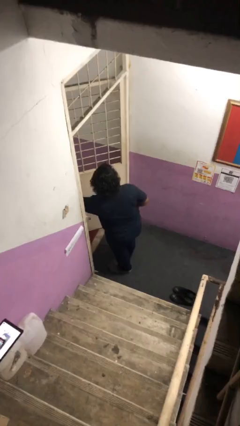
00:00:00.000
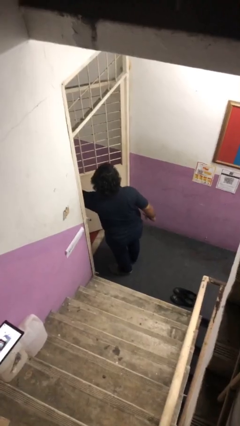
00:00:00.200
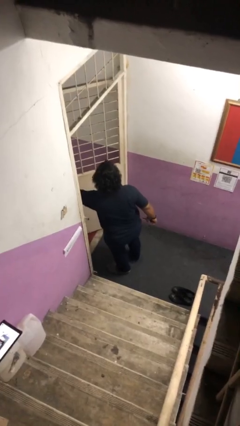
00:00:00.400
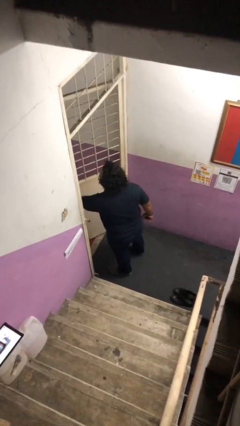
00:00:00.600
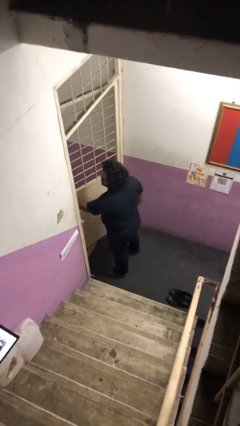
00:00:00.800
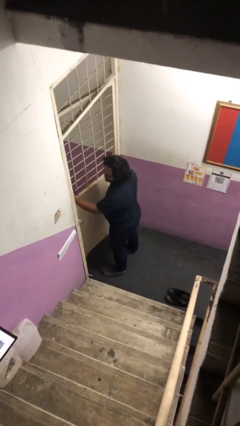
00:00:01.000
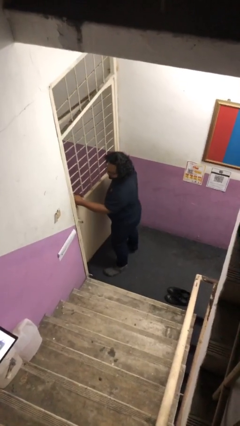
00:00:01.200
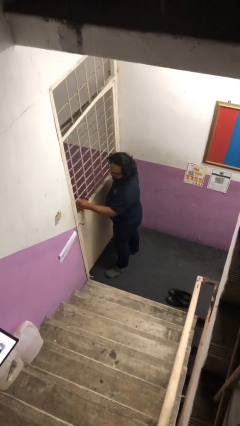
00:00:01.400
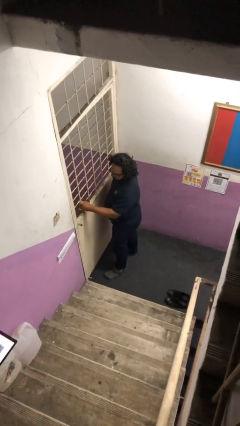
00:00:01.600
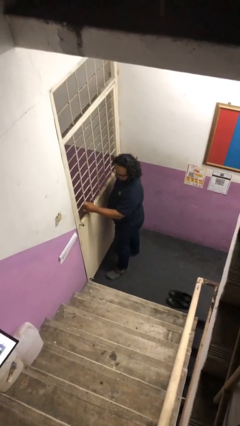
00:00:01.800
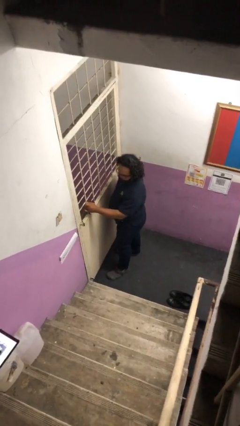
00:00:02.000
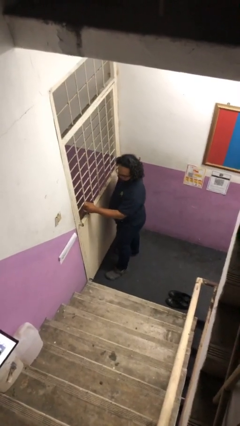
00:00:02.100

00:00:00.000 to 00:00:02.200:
person closes facility door

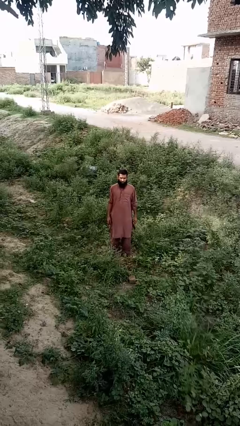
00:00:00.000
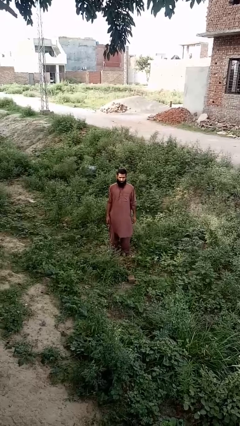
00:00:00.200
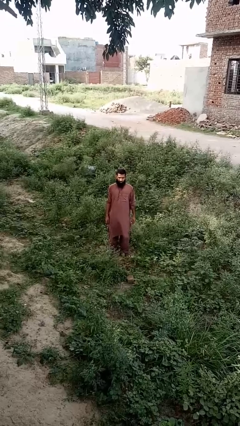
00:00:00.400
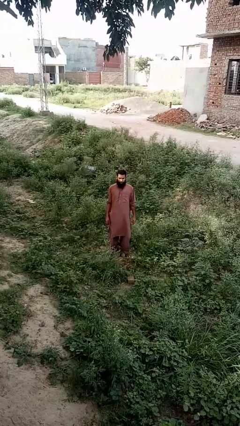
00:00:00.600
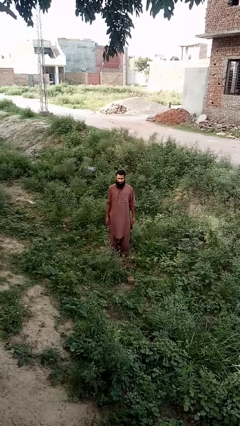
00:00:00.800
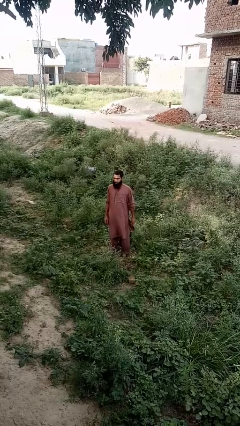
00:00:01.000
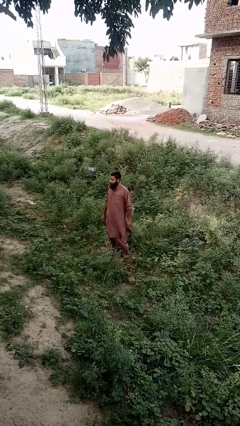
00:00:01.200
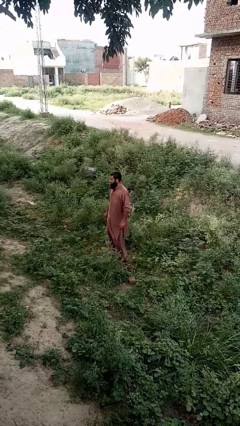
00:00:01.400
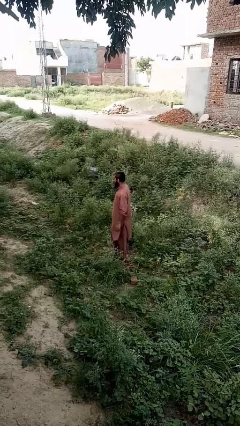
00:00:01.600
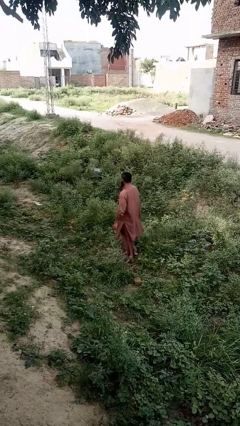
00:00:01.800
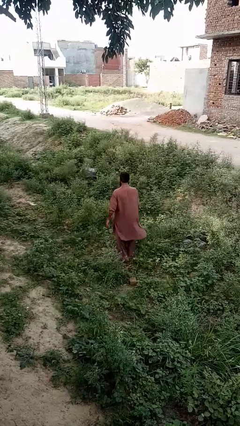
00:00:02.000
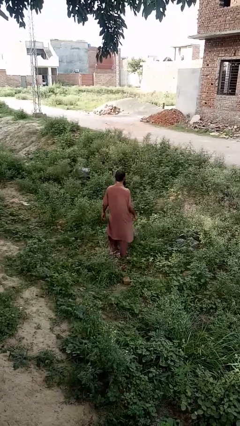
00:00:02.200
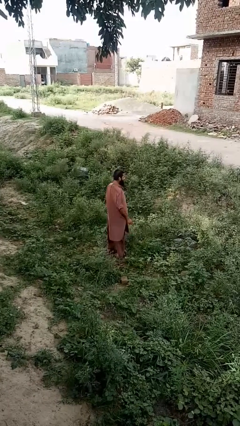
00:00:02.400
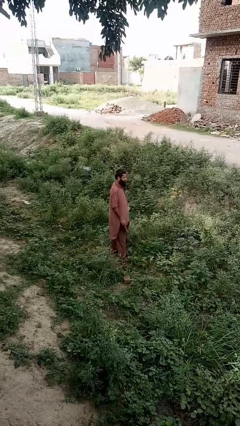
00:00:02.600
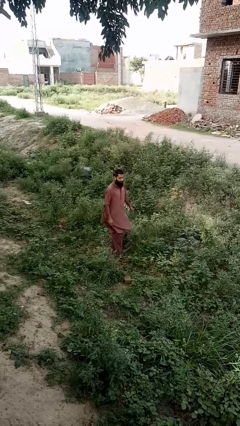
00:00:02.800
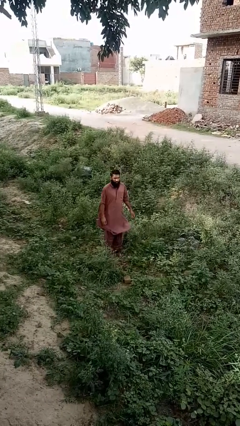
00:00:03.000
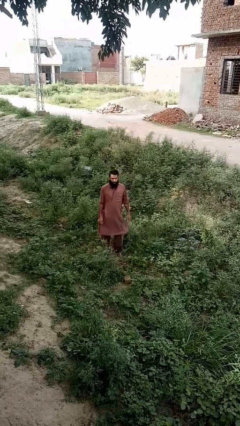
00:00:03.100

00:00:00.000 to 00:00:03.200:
person twirls

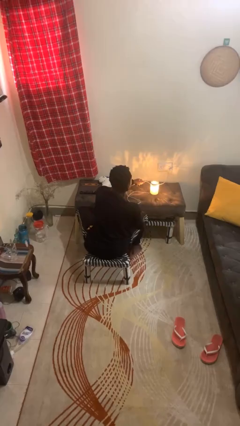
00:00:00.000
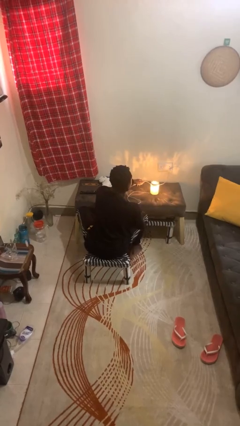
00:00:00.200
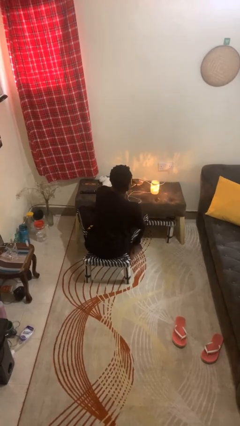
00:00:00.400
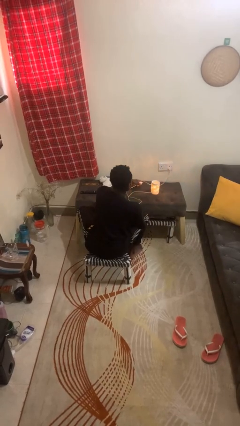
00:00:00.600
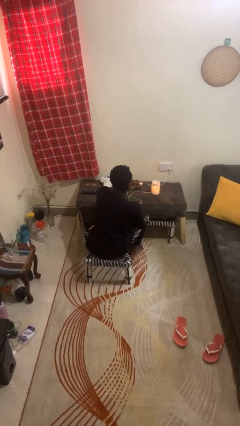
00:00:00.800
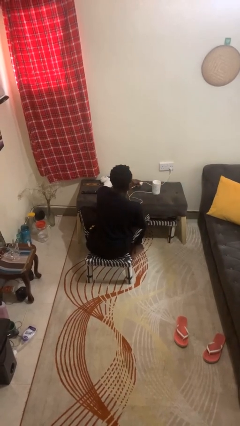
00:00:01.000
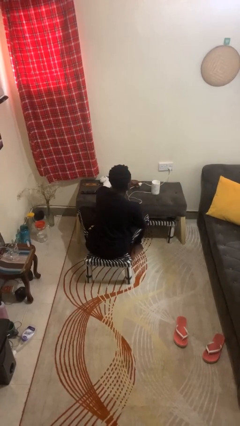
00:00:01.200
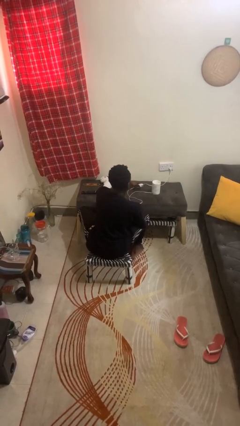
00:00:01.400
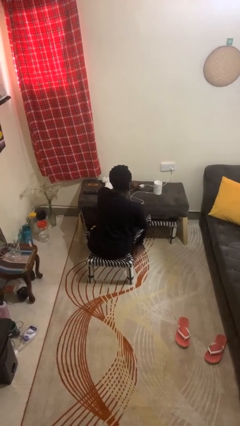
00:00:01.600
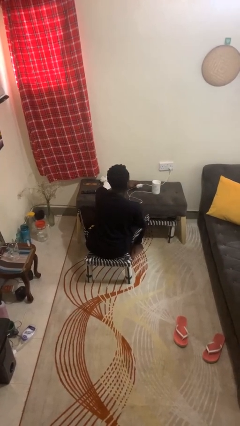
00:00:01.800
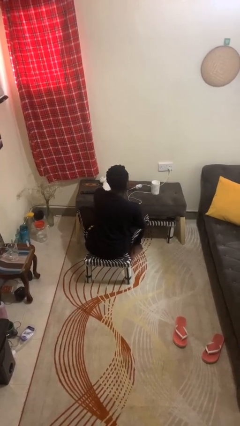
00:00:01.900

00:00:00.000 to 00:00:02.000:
person turns off lamp

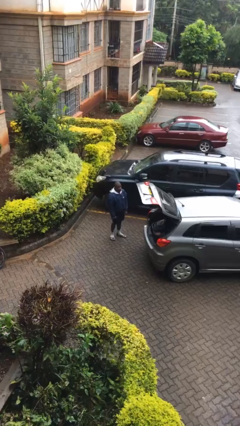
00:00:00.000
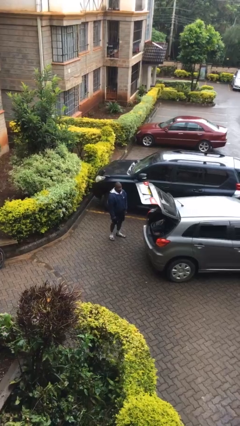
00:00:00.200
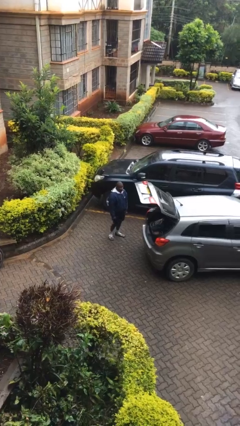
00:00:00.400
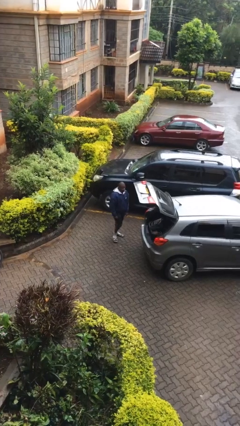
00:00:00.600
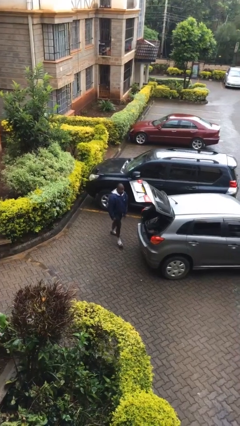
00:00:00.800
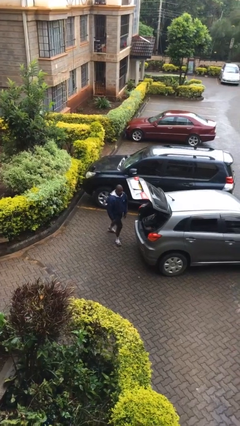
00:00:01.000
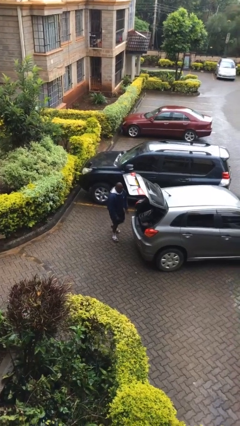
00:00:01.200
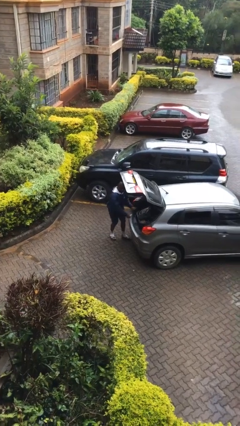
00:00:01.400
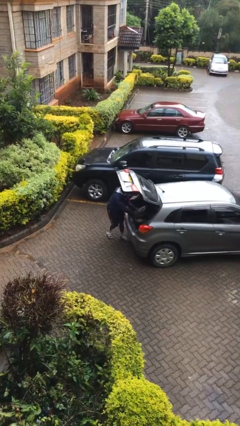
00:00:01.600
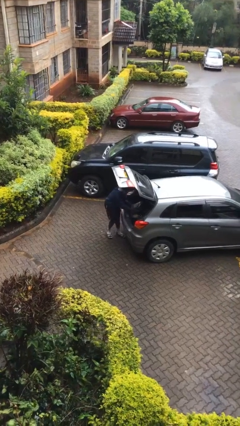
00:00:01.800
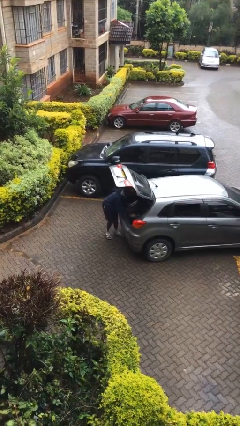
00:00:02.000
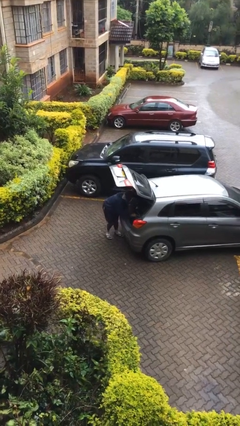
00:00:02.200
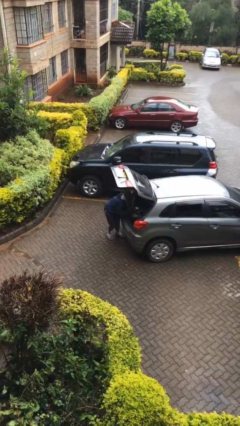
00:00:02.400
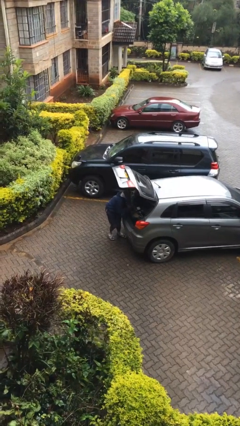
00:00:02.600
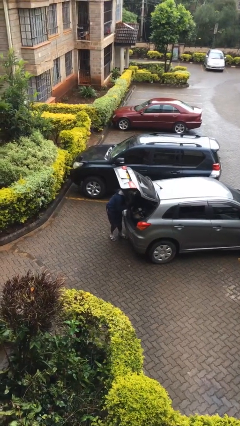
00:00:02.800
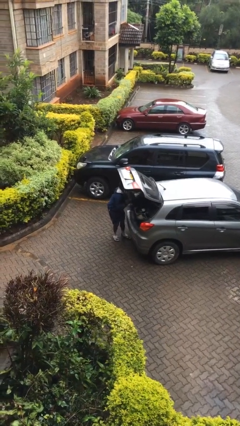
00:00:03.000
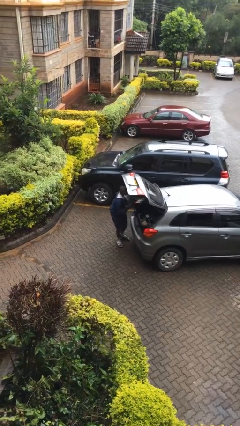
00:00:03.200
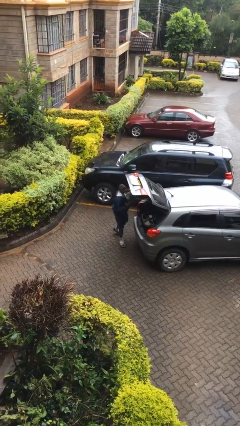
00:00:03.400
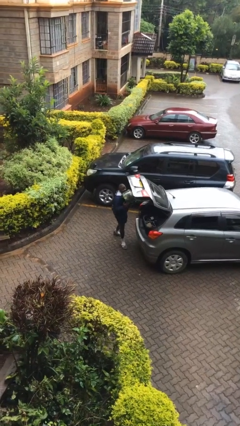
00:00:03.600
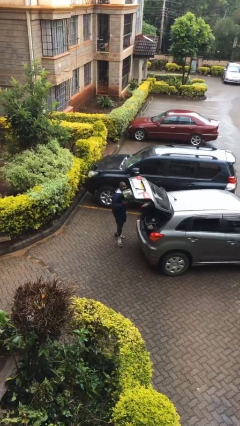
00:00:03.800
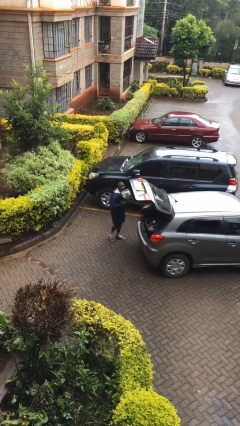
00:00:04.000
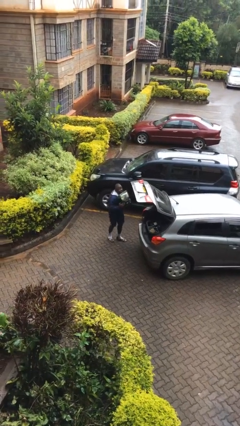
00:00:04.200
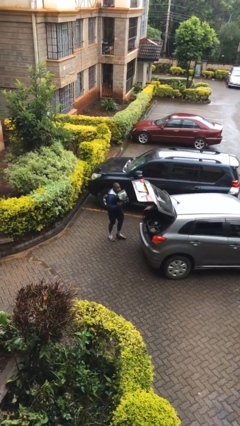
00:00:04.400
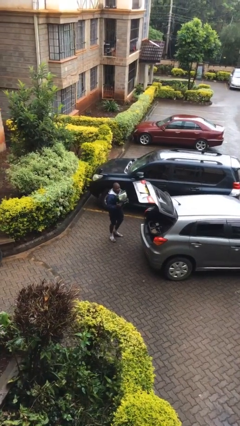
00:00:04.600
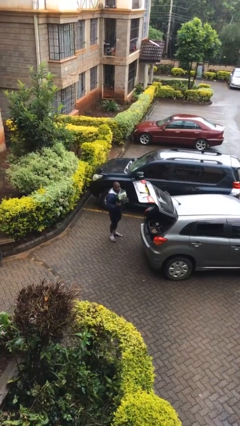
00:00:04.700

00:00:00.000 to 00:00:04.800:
person unloads car

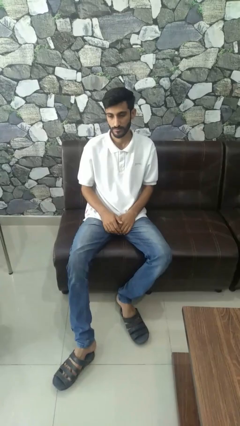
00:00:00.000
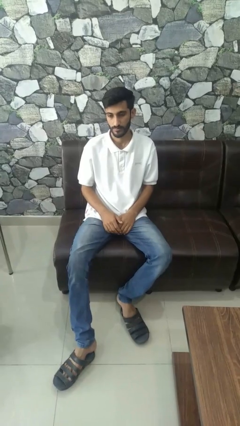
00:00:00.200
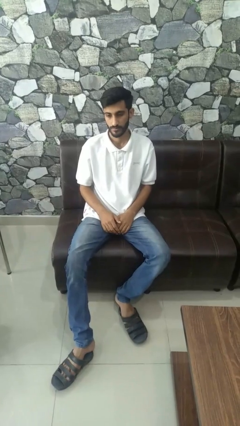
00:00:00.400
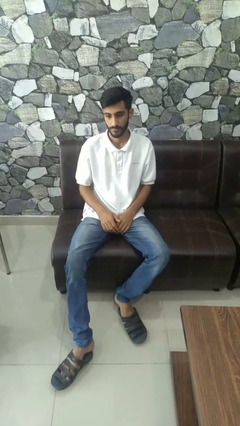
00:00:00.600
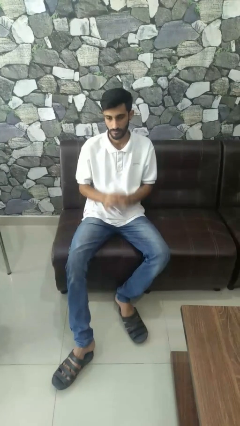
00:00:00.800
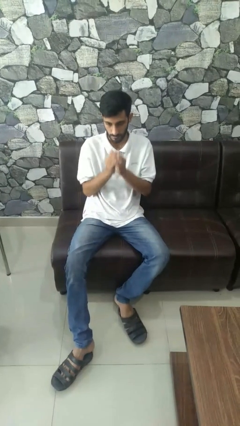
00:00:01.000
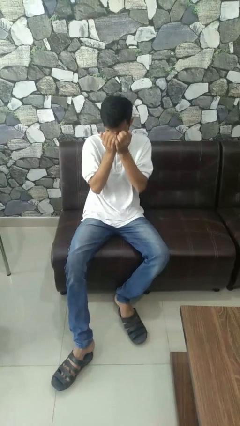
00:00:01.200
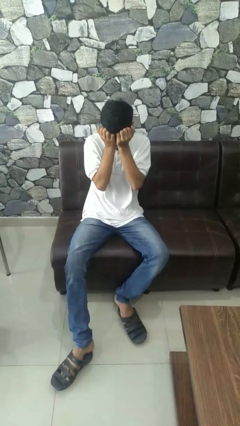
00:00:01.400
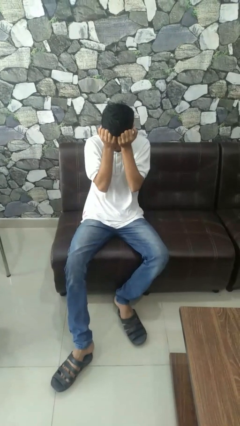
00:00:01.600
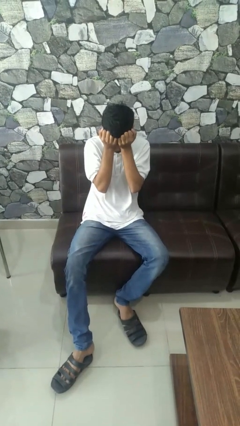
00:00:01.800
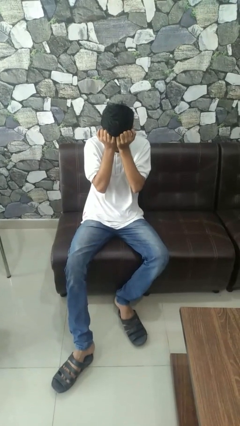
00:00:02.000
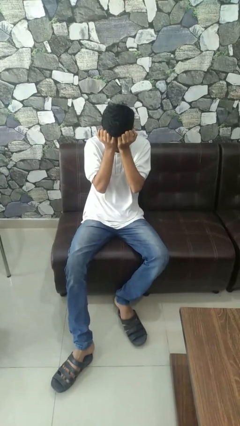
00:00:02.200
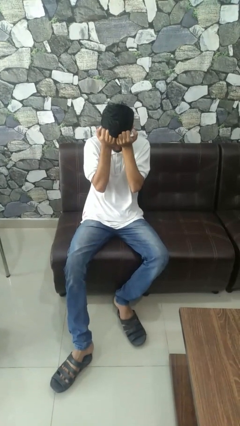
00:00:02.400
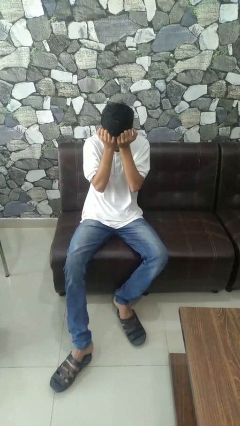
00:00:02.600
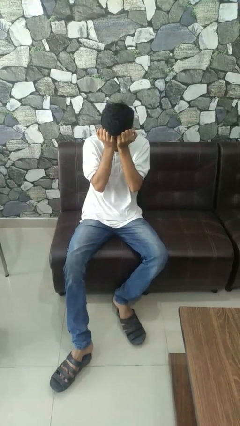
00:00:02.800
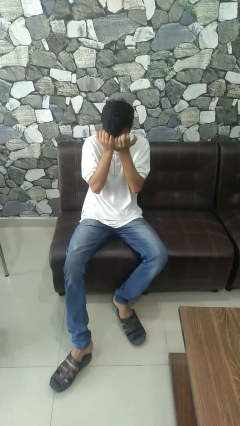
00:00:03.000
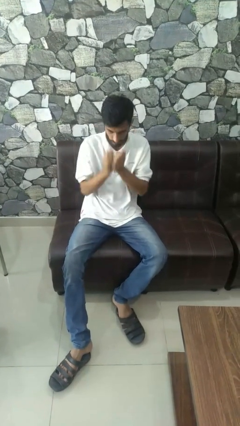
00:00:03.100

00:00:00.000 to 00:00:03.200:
person rubs eyes

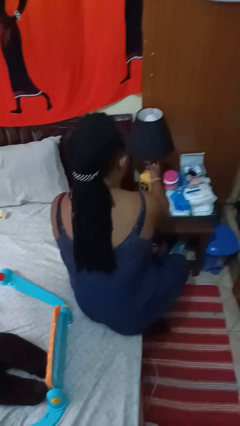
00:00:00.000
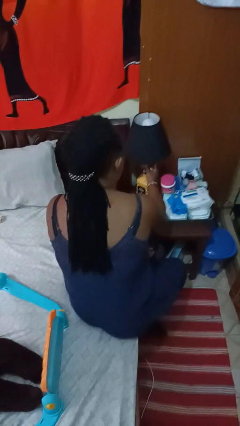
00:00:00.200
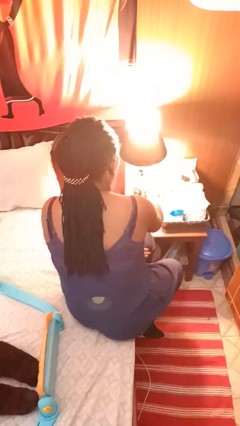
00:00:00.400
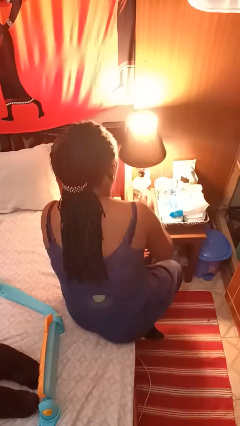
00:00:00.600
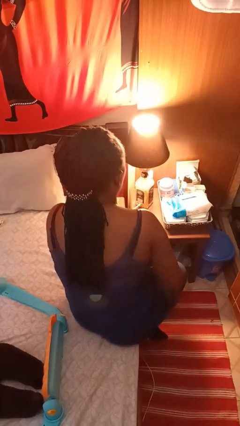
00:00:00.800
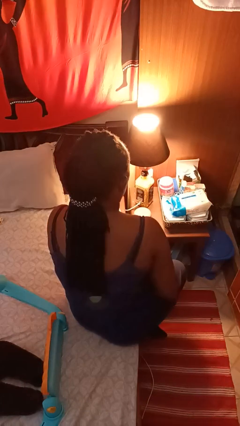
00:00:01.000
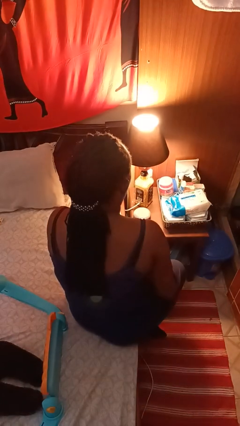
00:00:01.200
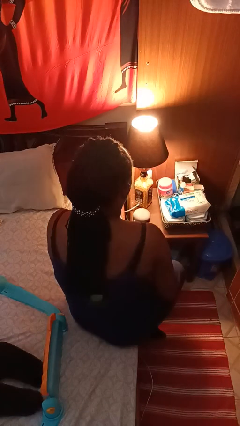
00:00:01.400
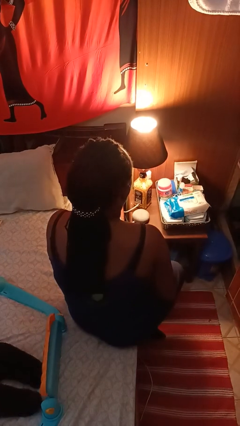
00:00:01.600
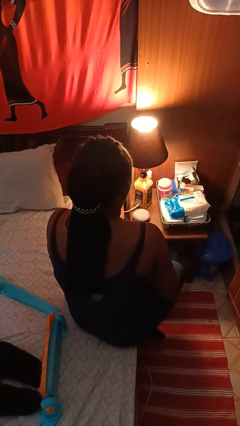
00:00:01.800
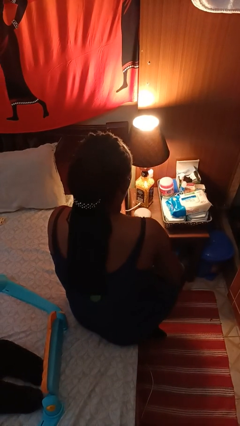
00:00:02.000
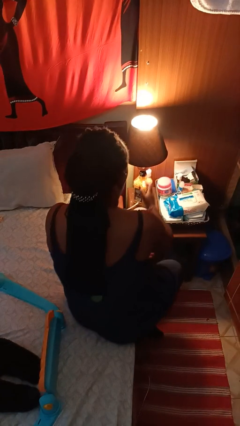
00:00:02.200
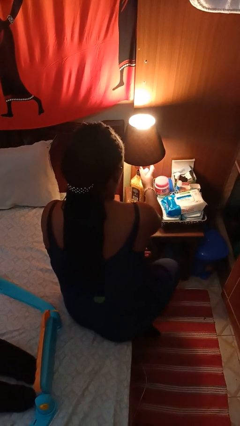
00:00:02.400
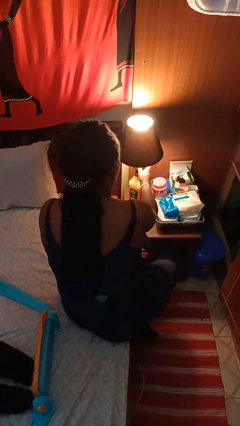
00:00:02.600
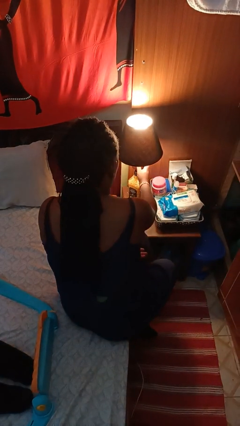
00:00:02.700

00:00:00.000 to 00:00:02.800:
person turns on lamp
